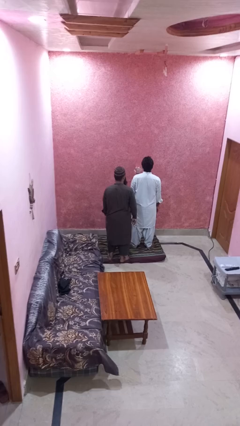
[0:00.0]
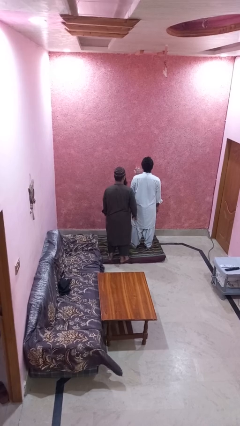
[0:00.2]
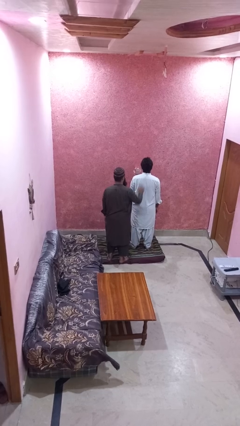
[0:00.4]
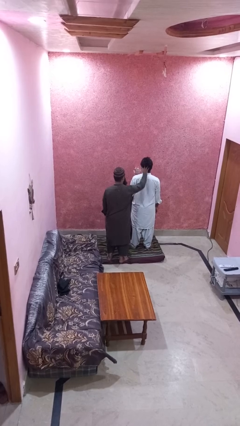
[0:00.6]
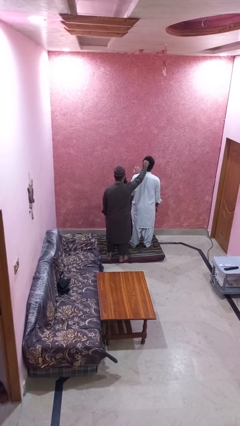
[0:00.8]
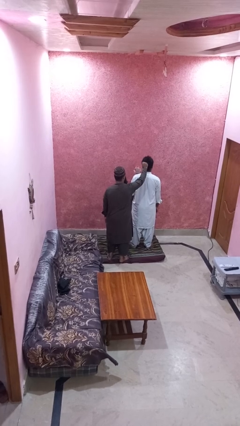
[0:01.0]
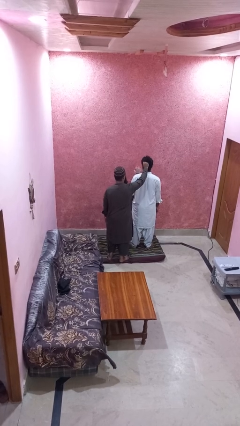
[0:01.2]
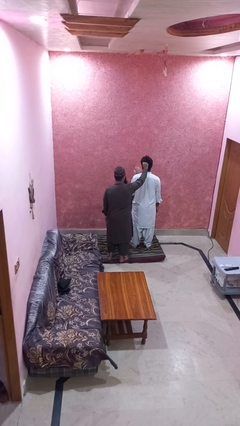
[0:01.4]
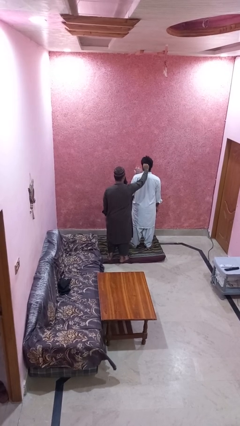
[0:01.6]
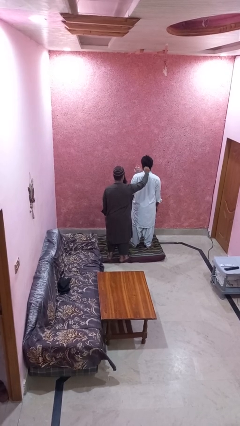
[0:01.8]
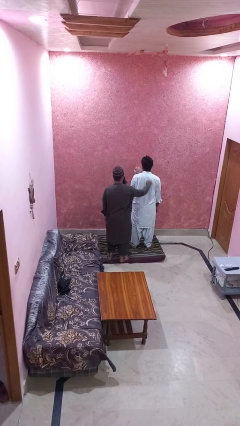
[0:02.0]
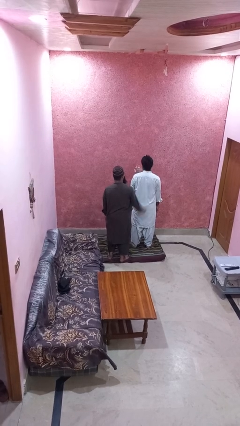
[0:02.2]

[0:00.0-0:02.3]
person grabs person by hair

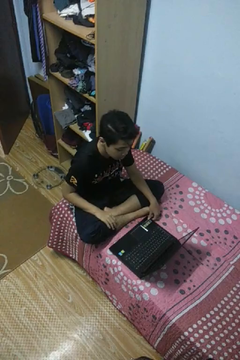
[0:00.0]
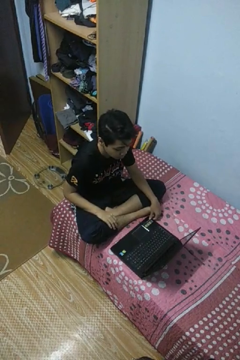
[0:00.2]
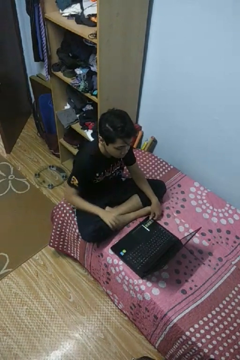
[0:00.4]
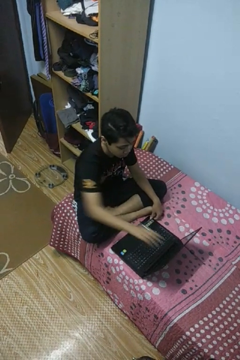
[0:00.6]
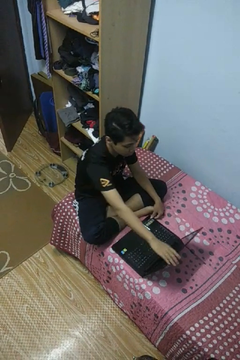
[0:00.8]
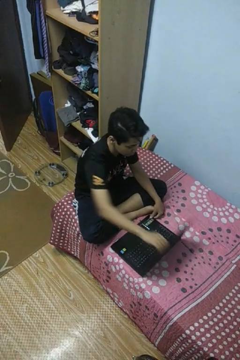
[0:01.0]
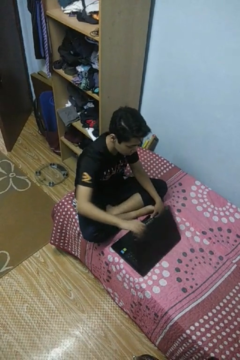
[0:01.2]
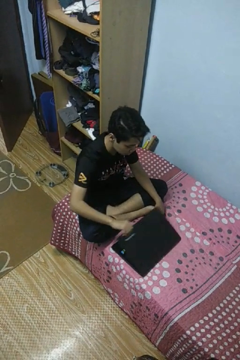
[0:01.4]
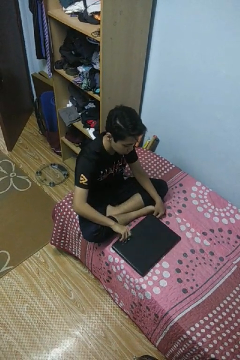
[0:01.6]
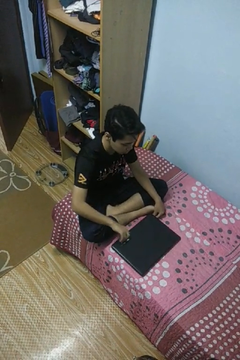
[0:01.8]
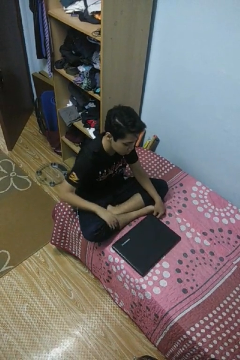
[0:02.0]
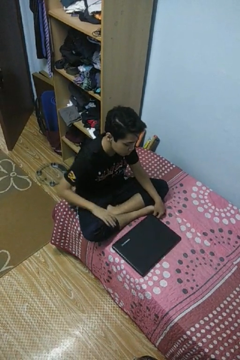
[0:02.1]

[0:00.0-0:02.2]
person closes laptop

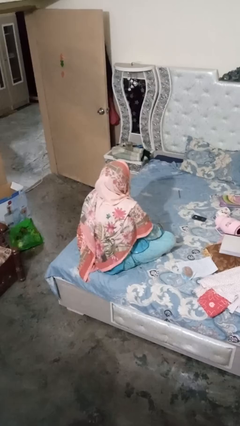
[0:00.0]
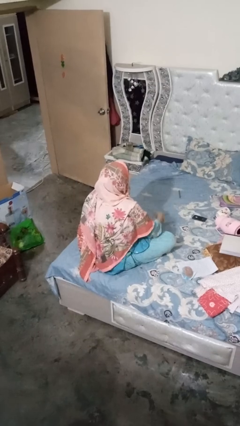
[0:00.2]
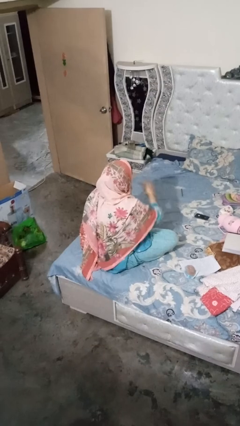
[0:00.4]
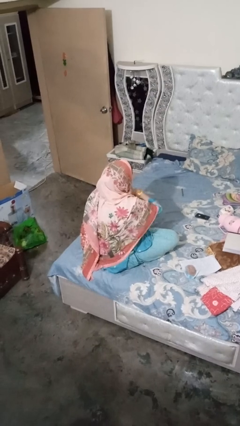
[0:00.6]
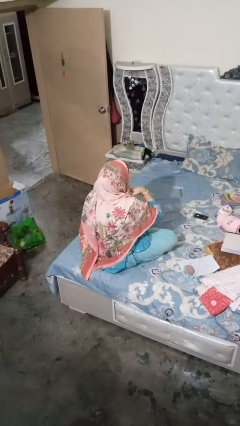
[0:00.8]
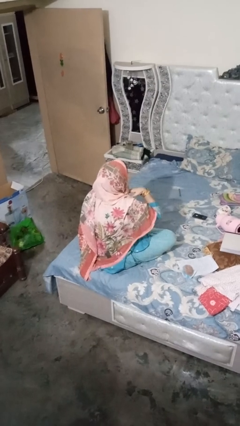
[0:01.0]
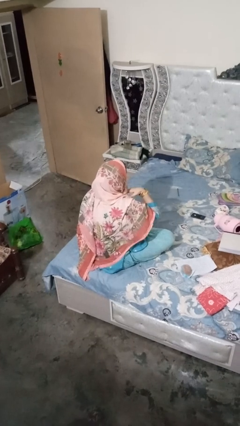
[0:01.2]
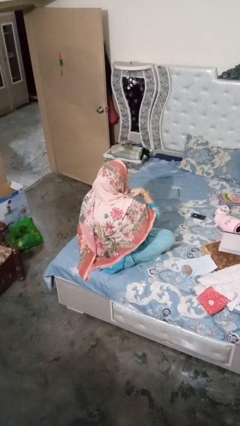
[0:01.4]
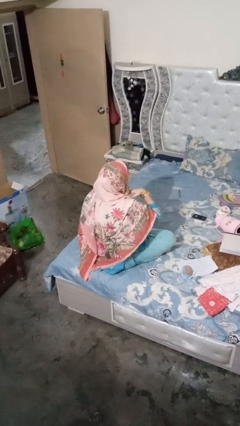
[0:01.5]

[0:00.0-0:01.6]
person gestures cut

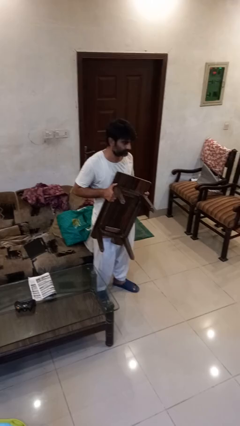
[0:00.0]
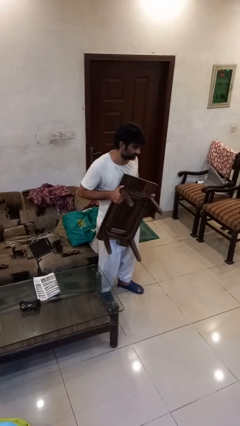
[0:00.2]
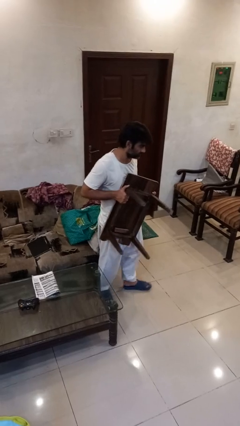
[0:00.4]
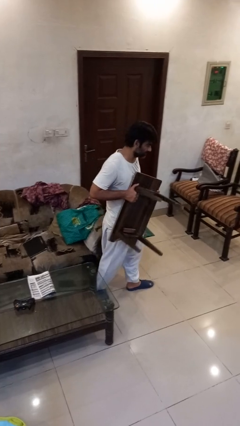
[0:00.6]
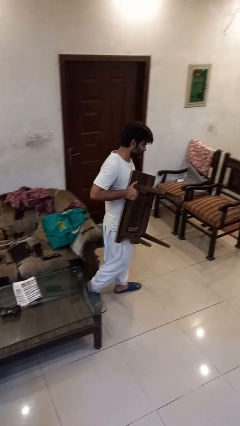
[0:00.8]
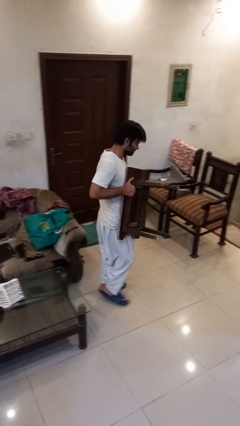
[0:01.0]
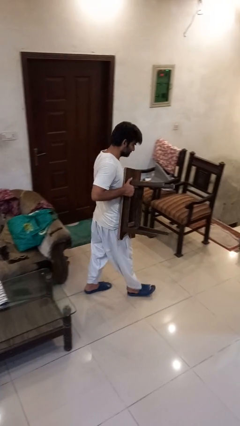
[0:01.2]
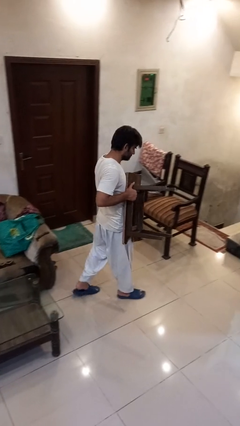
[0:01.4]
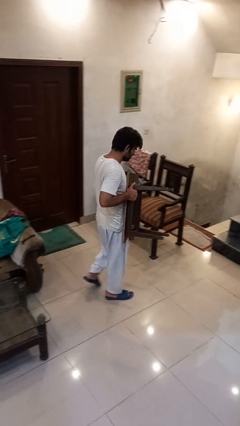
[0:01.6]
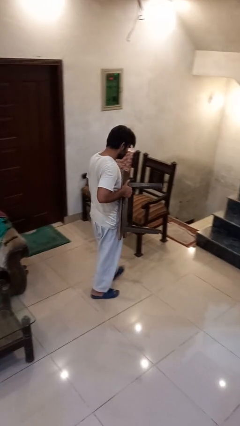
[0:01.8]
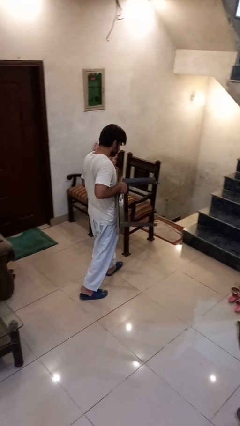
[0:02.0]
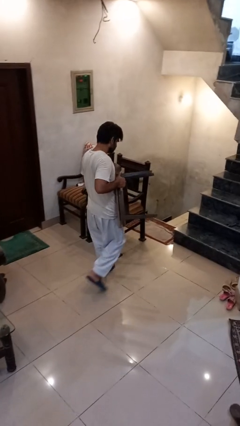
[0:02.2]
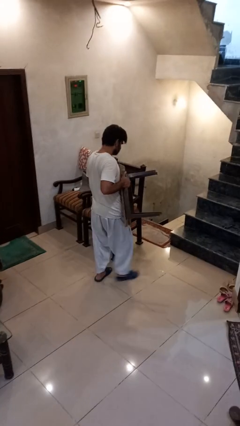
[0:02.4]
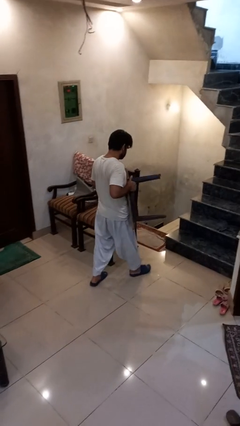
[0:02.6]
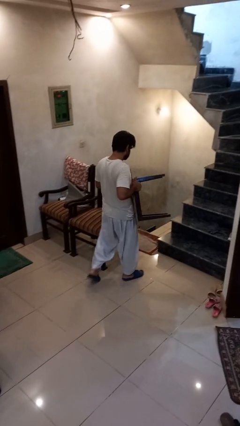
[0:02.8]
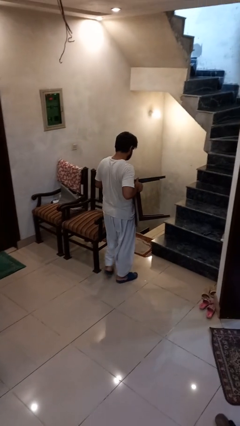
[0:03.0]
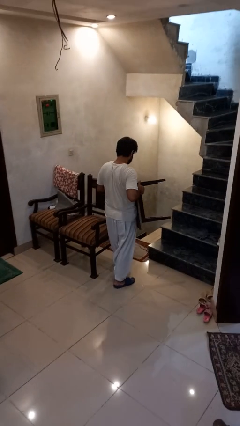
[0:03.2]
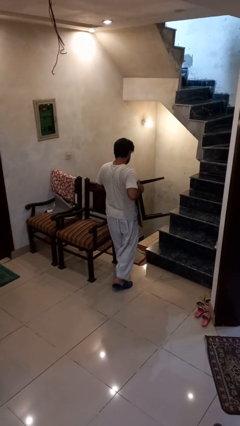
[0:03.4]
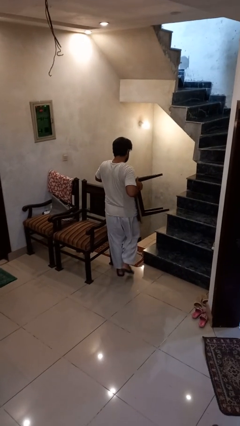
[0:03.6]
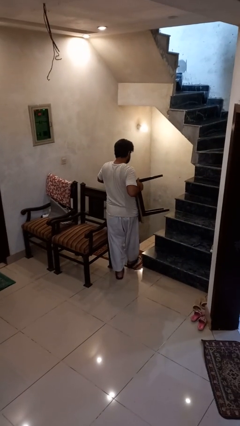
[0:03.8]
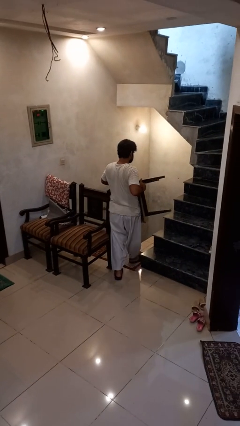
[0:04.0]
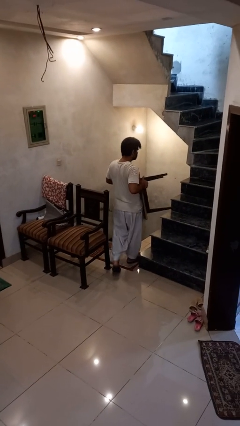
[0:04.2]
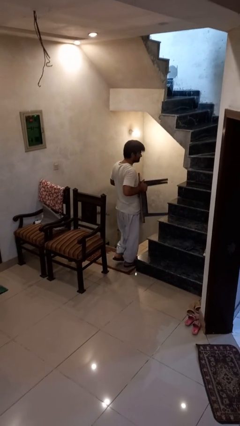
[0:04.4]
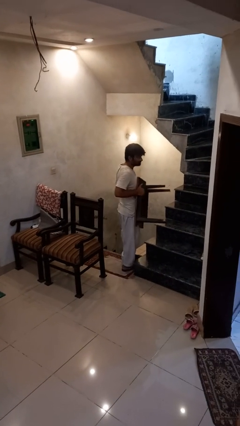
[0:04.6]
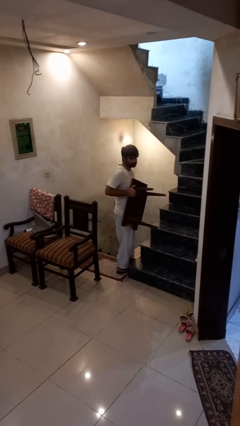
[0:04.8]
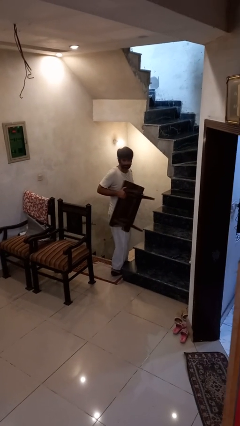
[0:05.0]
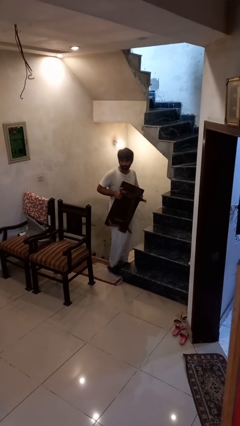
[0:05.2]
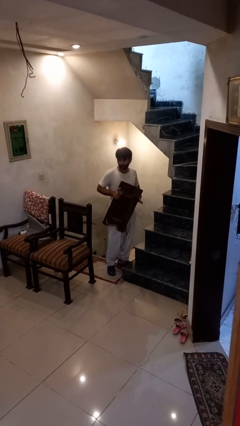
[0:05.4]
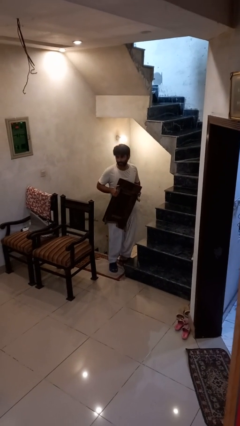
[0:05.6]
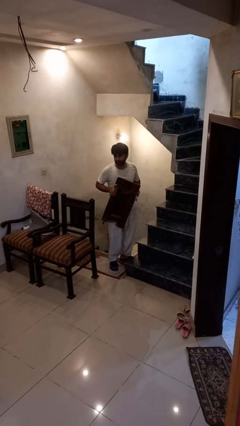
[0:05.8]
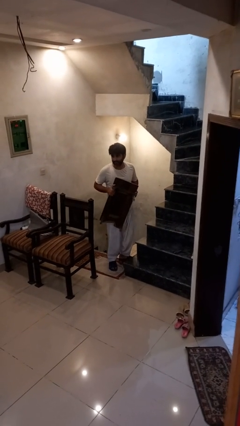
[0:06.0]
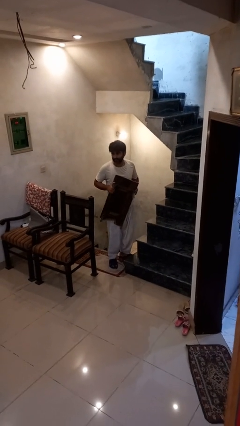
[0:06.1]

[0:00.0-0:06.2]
person carries furniture

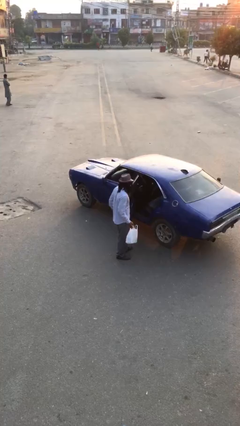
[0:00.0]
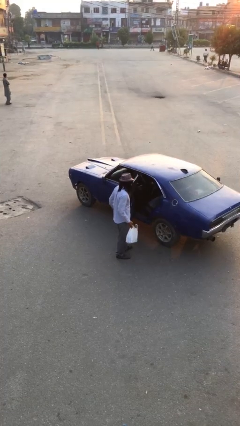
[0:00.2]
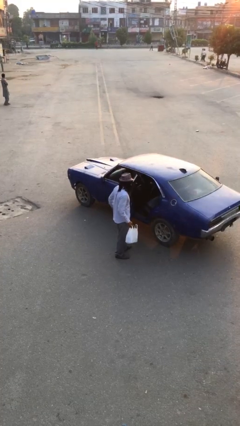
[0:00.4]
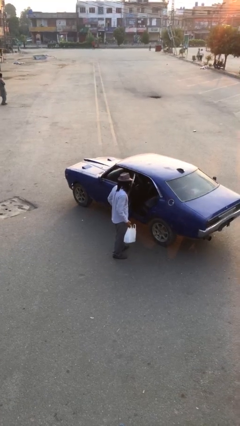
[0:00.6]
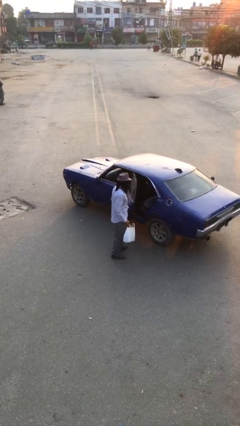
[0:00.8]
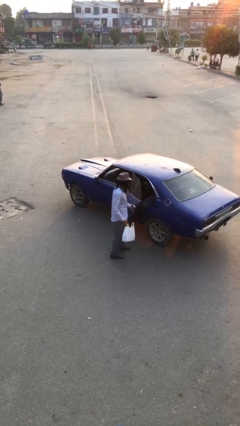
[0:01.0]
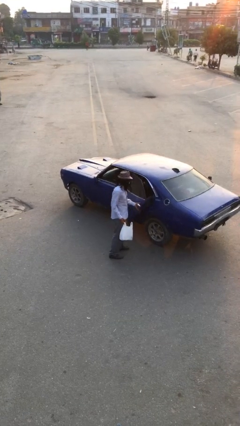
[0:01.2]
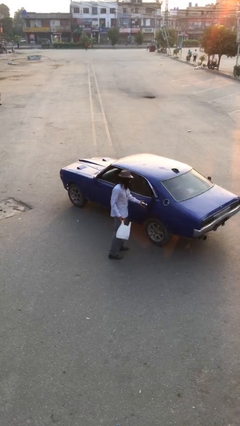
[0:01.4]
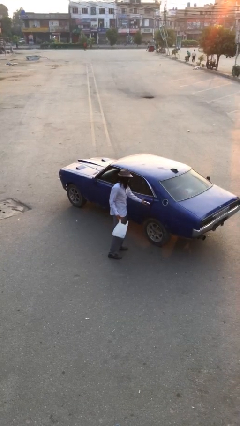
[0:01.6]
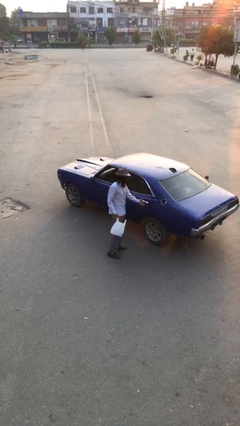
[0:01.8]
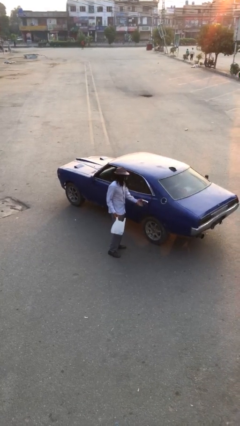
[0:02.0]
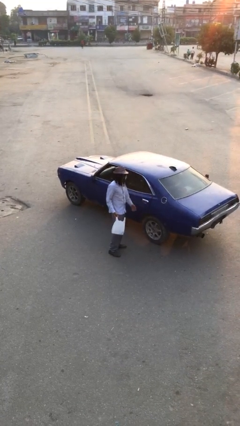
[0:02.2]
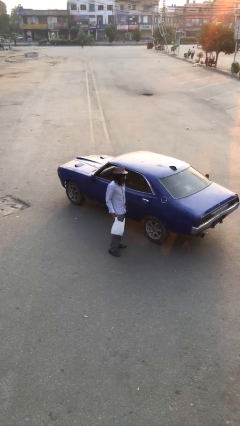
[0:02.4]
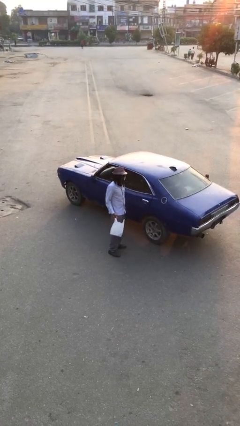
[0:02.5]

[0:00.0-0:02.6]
person closes car door

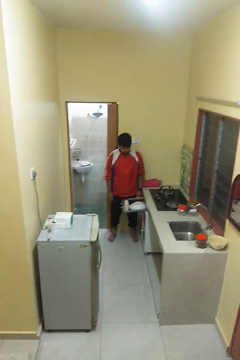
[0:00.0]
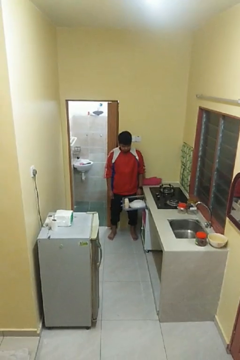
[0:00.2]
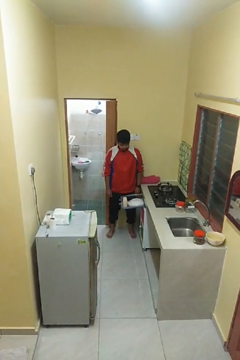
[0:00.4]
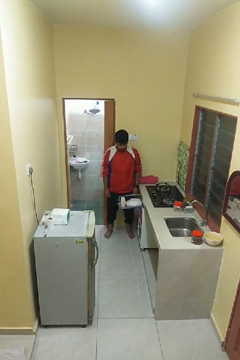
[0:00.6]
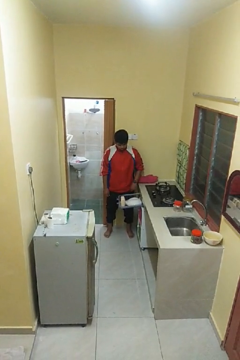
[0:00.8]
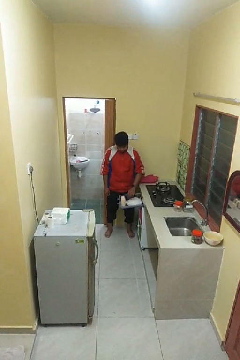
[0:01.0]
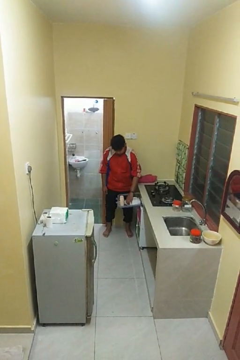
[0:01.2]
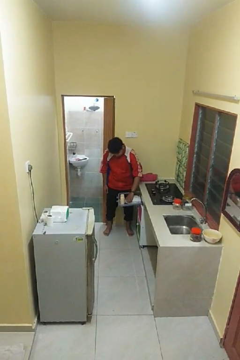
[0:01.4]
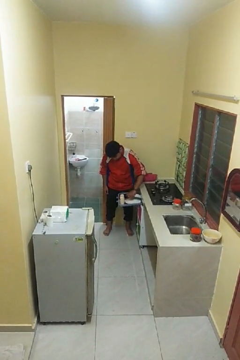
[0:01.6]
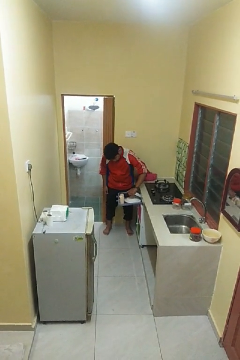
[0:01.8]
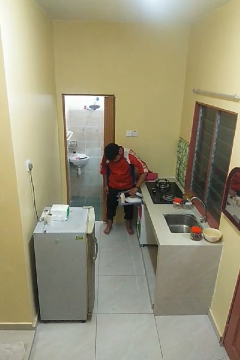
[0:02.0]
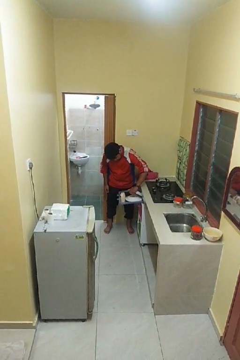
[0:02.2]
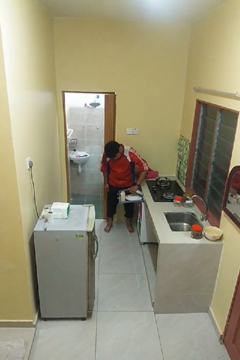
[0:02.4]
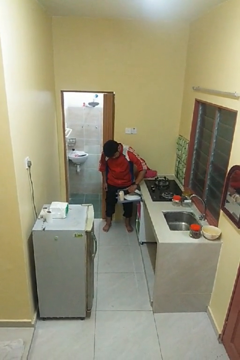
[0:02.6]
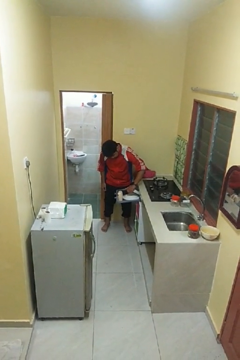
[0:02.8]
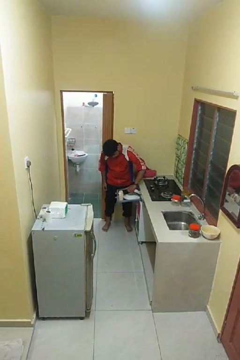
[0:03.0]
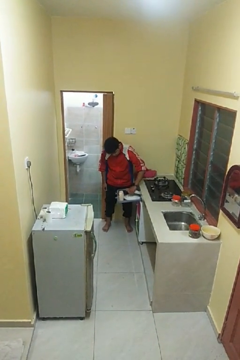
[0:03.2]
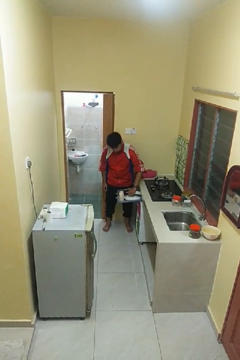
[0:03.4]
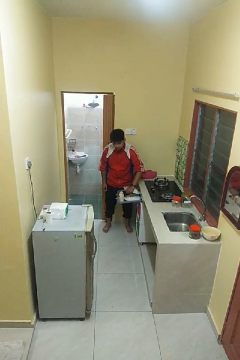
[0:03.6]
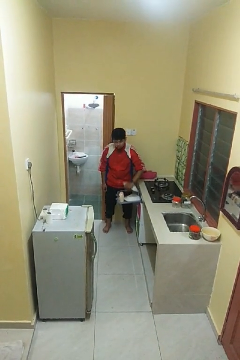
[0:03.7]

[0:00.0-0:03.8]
person takes object from kitchen drawer
